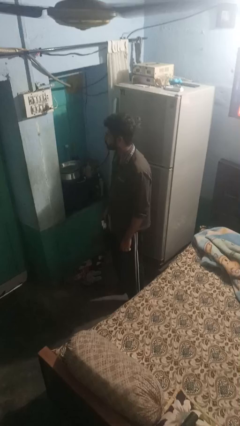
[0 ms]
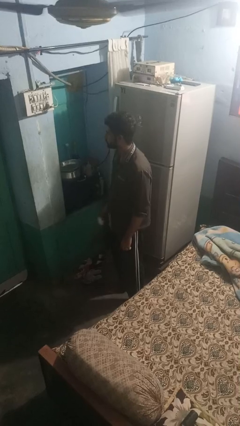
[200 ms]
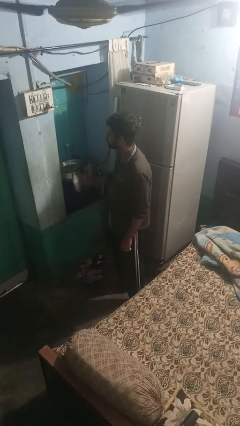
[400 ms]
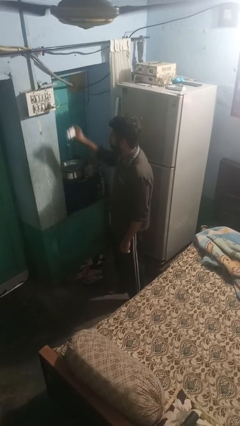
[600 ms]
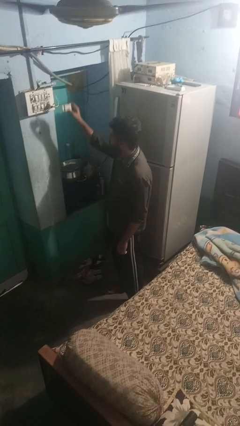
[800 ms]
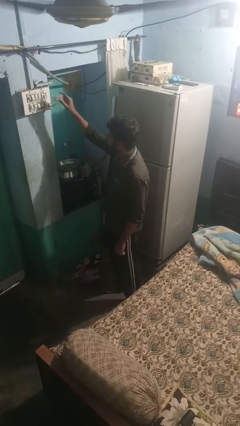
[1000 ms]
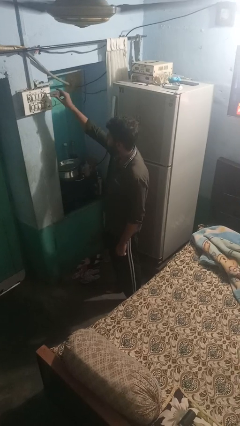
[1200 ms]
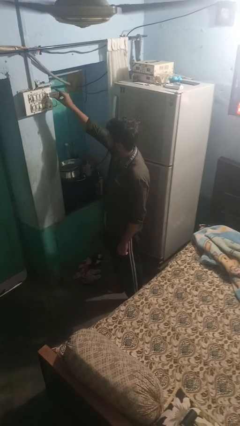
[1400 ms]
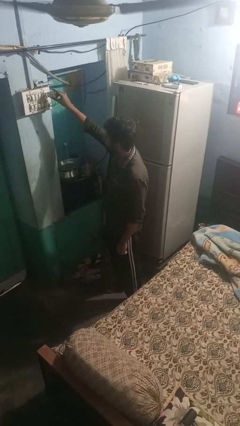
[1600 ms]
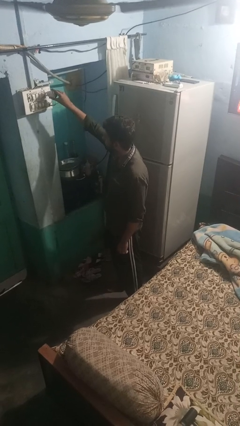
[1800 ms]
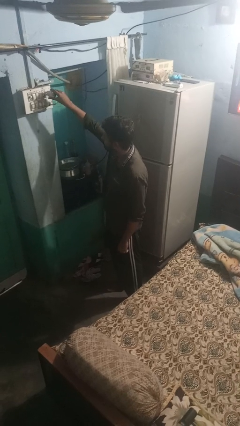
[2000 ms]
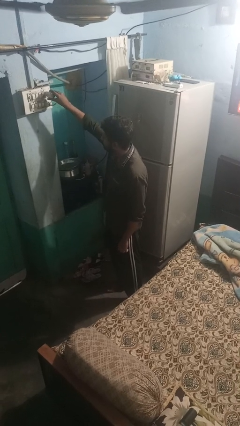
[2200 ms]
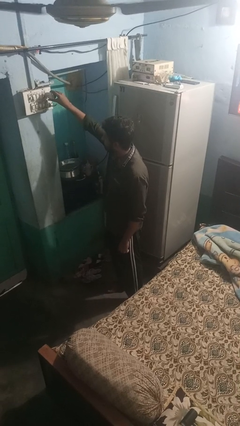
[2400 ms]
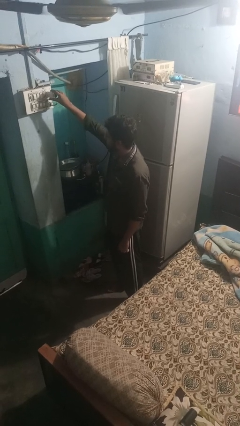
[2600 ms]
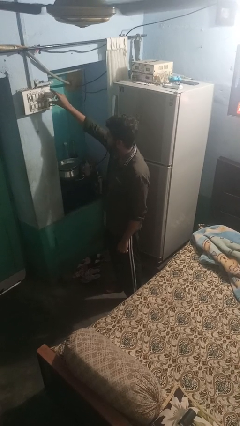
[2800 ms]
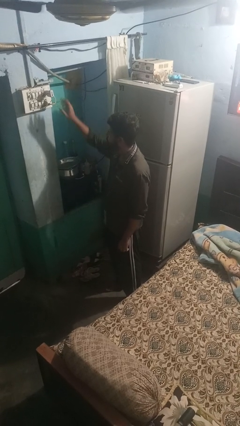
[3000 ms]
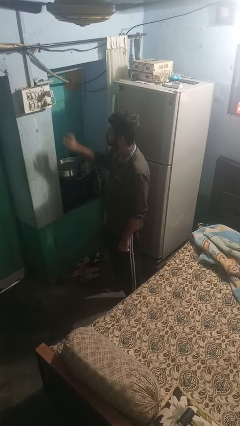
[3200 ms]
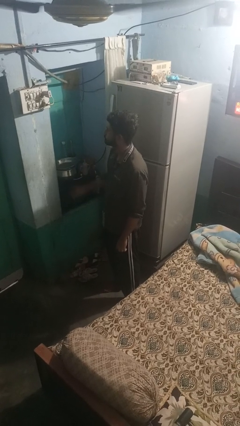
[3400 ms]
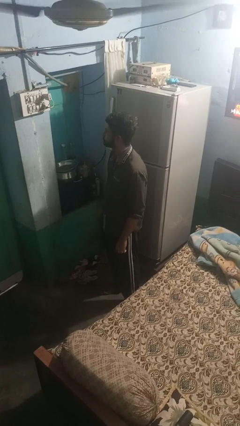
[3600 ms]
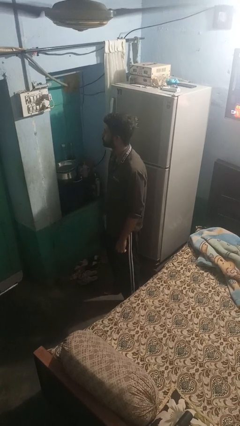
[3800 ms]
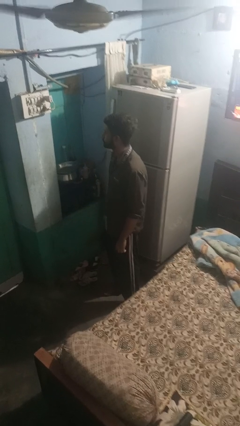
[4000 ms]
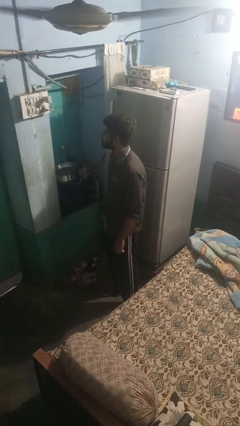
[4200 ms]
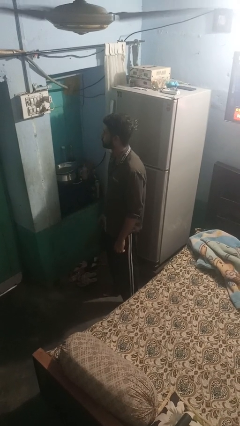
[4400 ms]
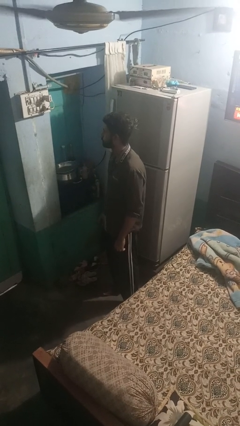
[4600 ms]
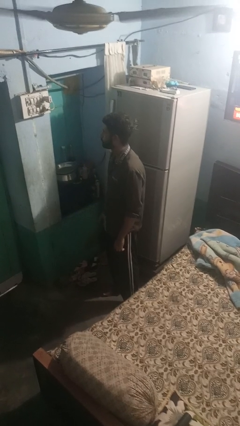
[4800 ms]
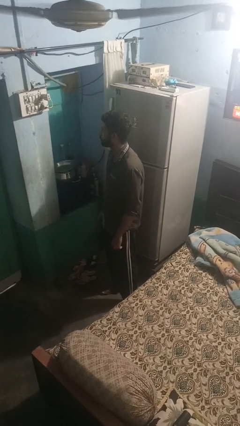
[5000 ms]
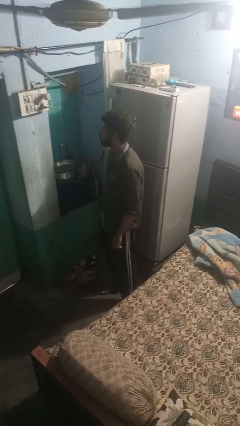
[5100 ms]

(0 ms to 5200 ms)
person plugs into electrical socket

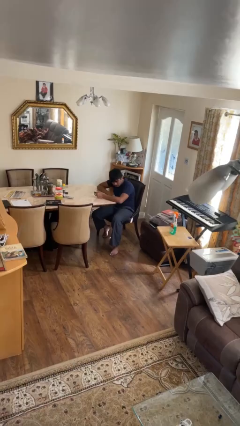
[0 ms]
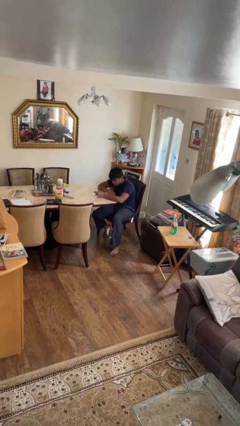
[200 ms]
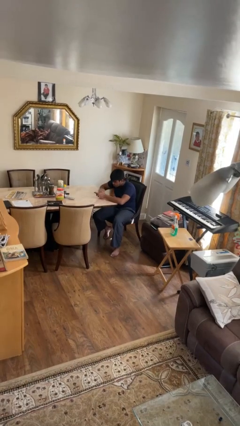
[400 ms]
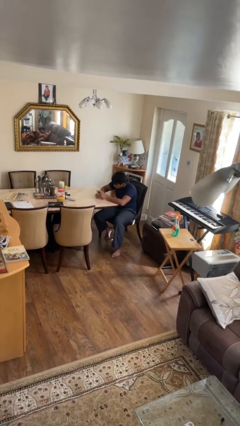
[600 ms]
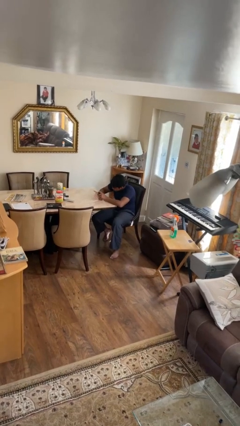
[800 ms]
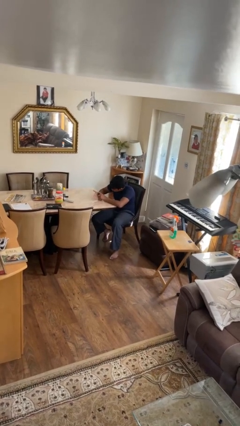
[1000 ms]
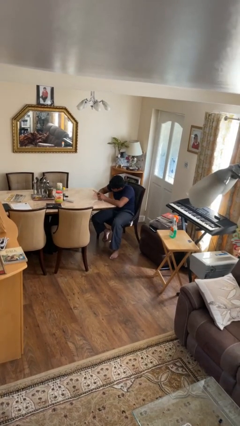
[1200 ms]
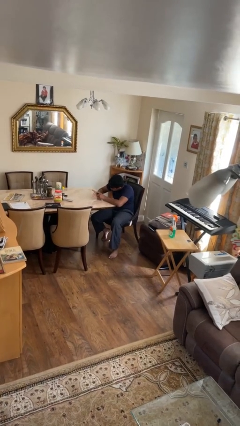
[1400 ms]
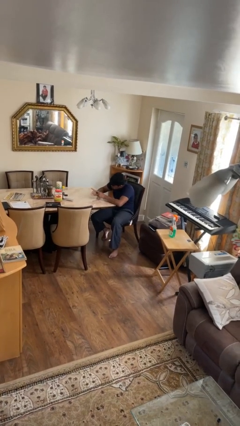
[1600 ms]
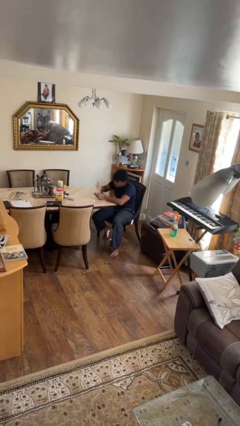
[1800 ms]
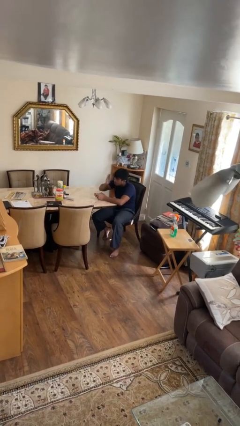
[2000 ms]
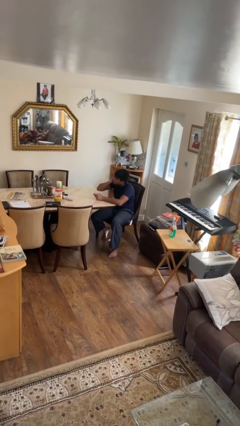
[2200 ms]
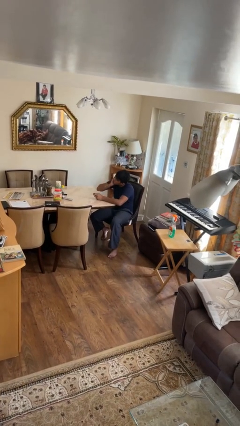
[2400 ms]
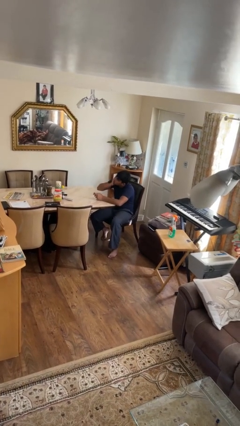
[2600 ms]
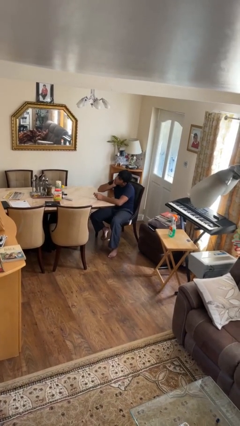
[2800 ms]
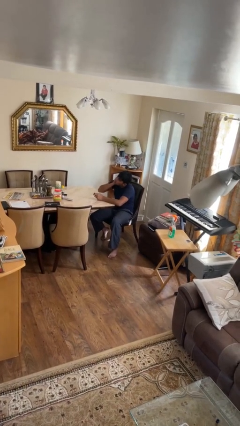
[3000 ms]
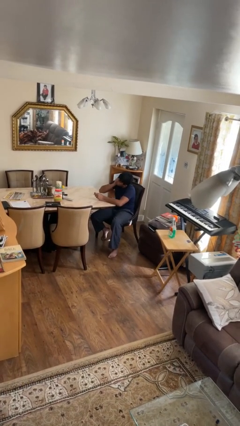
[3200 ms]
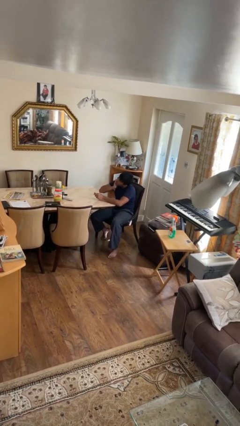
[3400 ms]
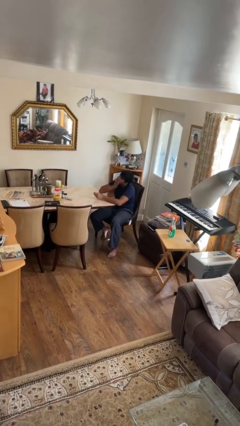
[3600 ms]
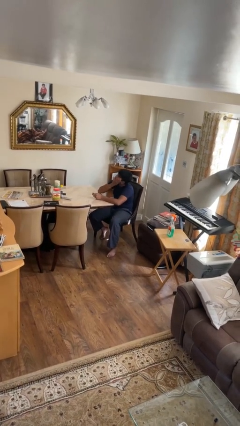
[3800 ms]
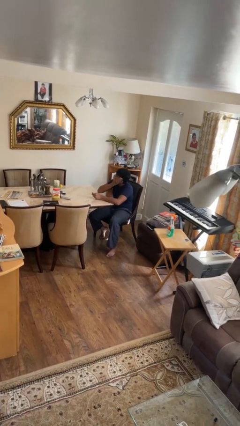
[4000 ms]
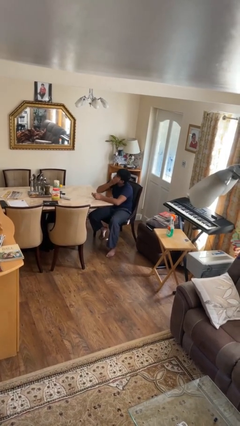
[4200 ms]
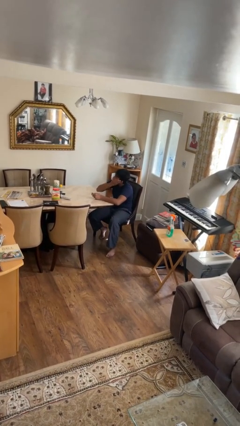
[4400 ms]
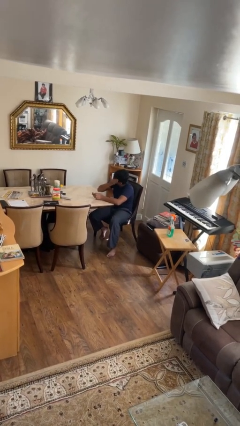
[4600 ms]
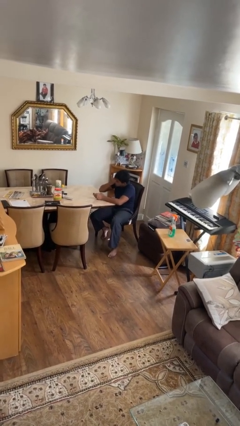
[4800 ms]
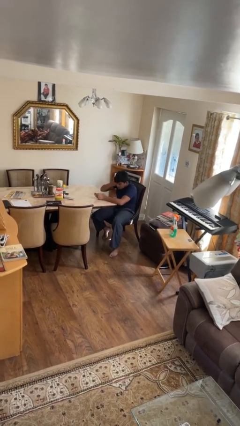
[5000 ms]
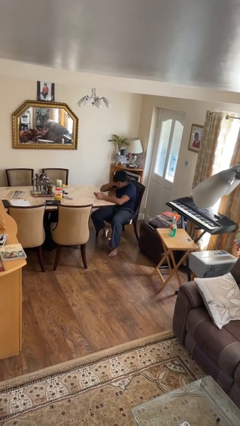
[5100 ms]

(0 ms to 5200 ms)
person applies foundation makeup

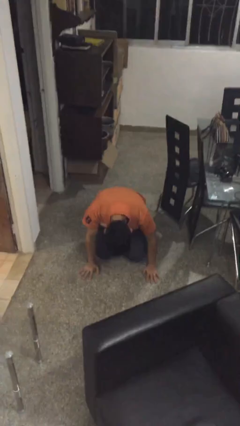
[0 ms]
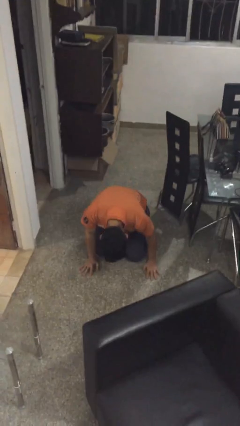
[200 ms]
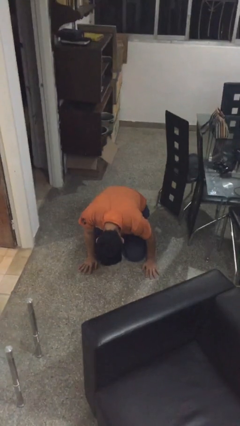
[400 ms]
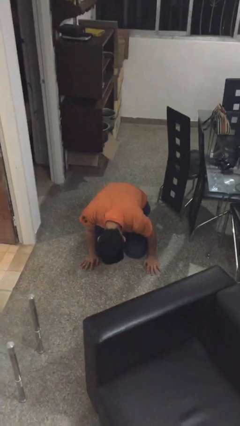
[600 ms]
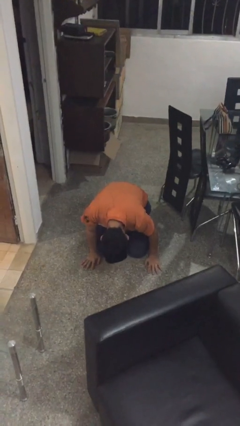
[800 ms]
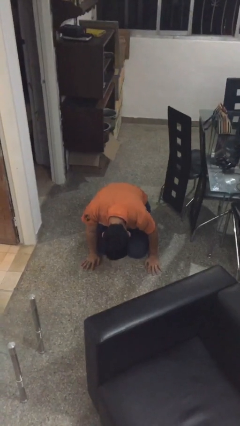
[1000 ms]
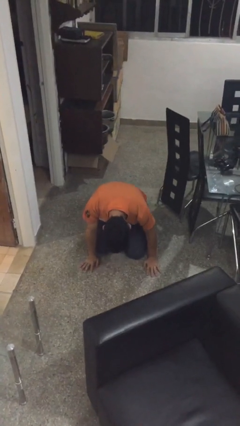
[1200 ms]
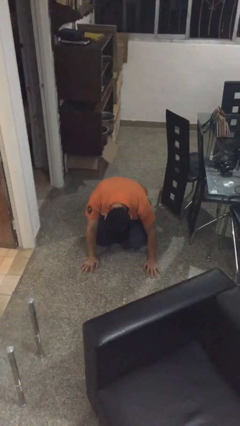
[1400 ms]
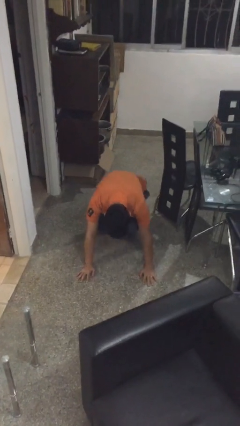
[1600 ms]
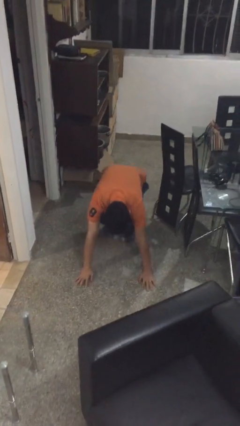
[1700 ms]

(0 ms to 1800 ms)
person lies down on floor

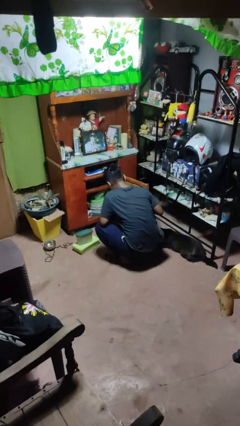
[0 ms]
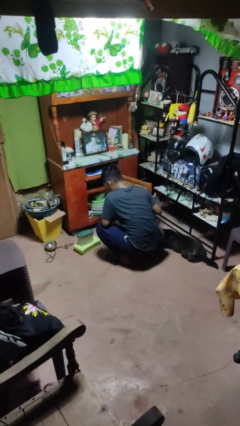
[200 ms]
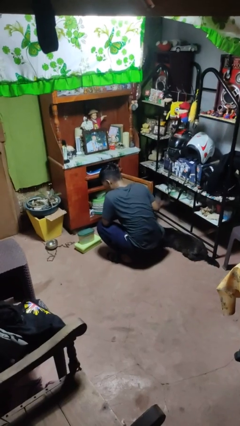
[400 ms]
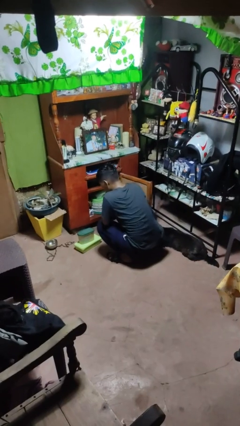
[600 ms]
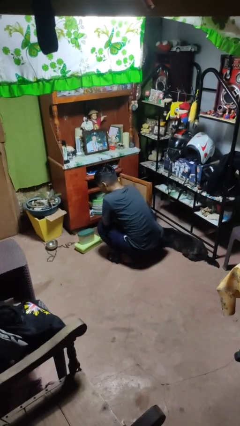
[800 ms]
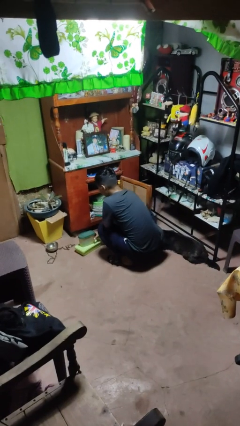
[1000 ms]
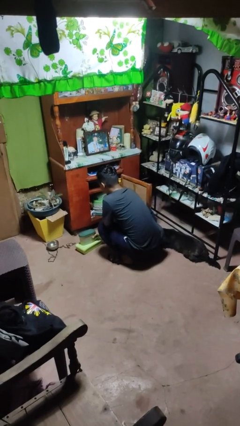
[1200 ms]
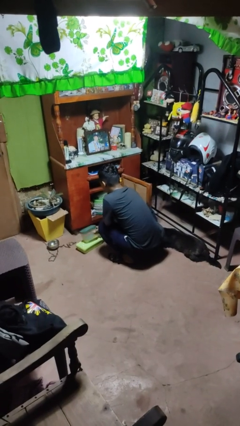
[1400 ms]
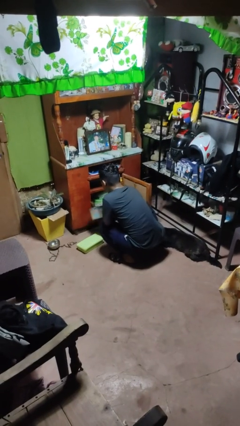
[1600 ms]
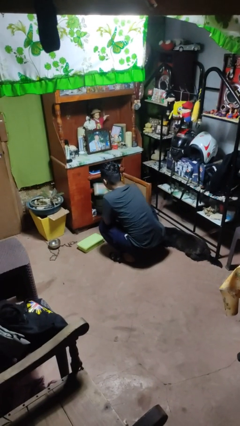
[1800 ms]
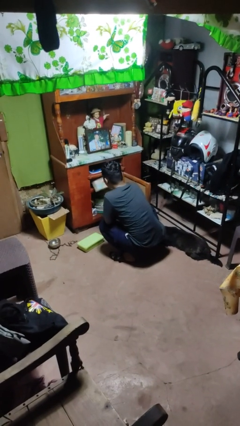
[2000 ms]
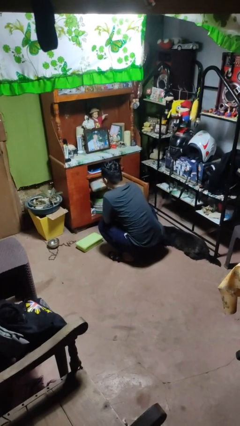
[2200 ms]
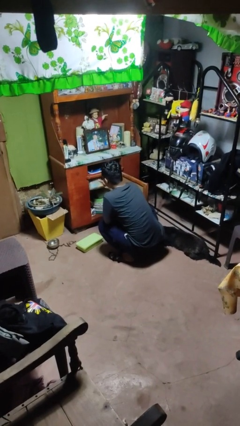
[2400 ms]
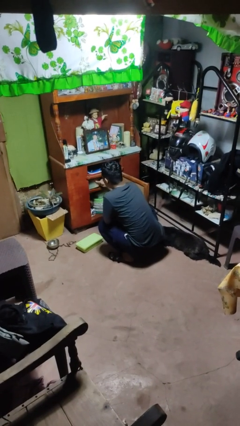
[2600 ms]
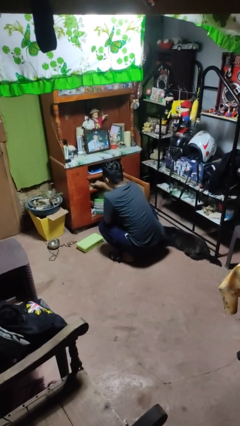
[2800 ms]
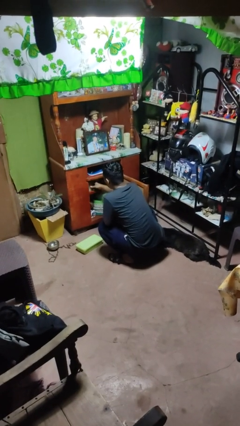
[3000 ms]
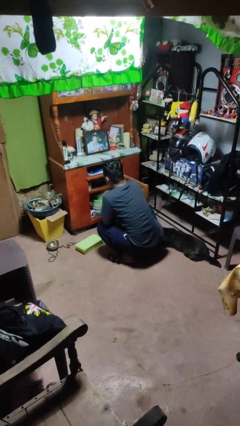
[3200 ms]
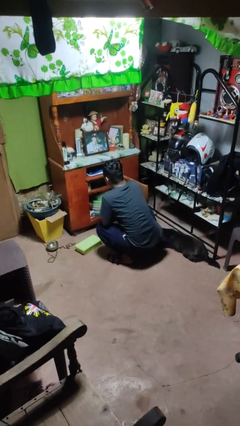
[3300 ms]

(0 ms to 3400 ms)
person puts object in cabinet

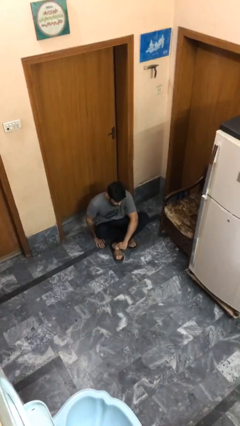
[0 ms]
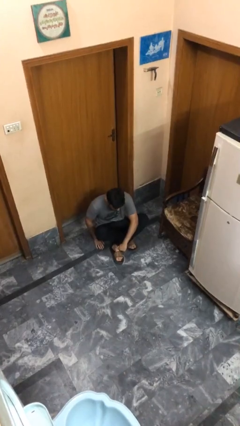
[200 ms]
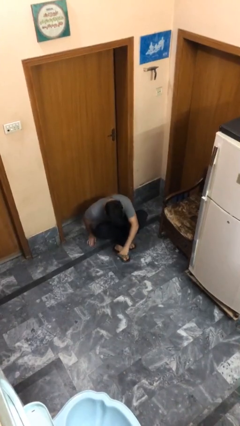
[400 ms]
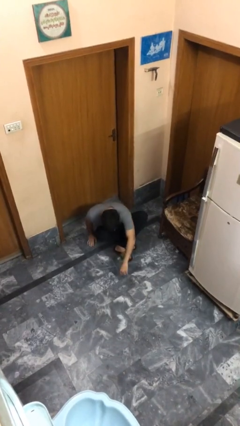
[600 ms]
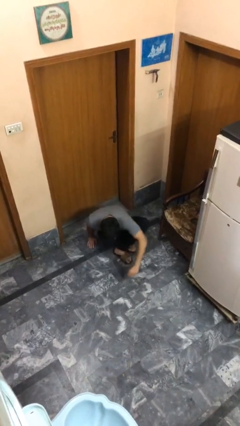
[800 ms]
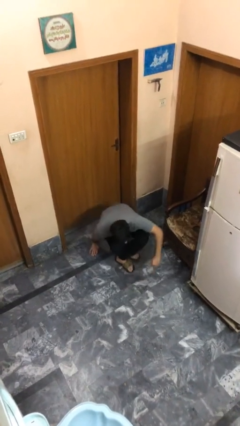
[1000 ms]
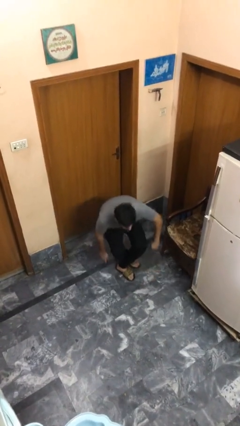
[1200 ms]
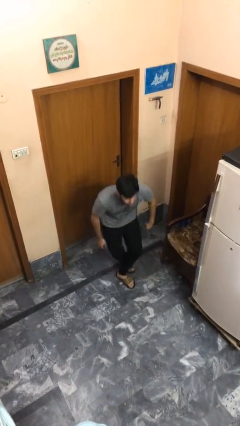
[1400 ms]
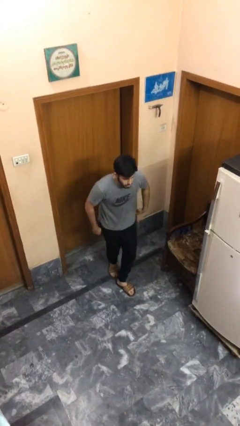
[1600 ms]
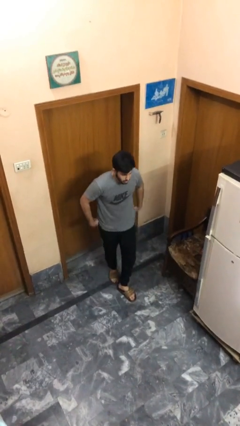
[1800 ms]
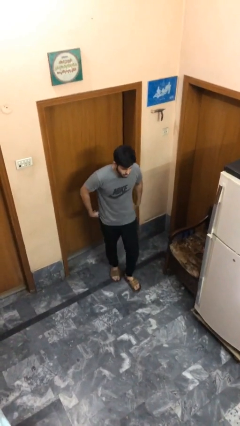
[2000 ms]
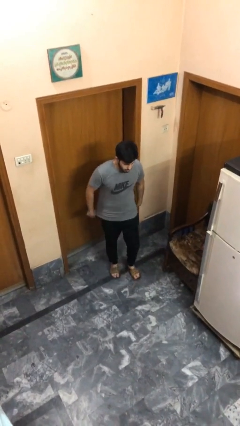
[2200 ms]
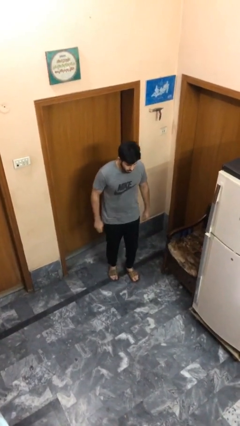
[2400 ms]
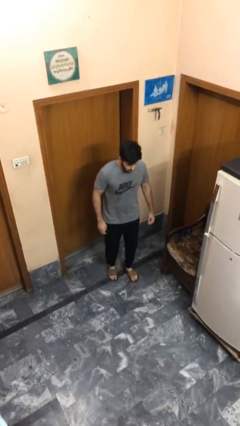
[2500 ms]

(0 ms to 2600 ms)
person stands up from floor
